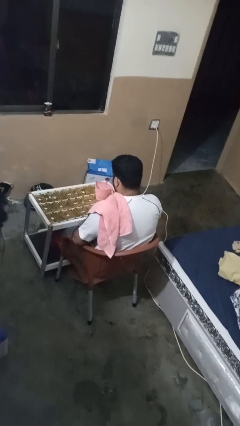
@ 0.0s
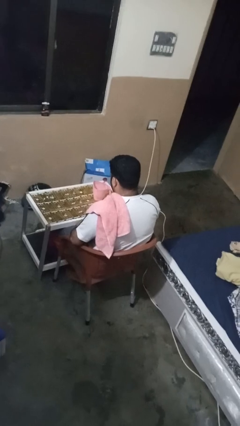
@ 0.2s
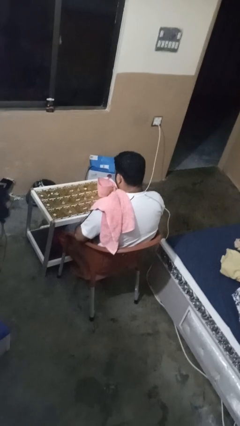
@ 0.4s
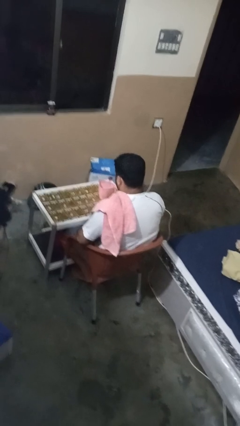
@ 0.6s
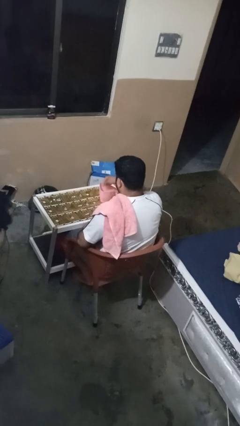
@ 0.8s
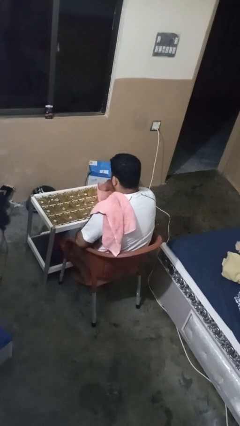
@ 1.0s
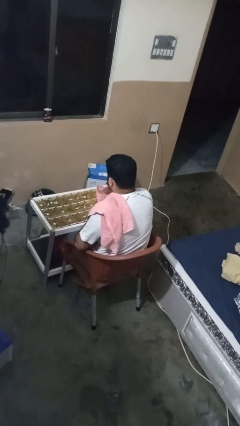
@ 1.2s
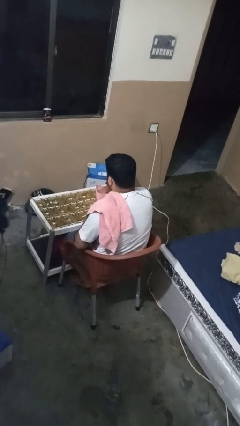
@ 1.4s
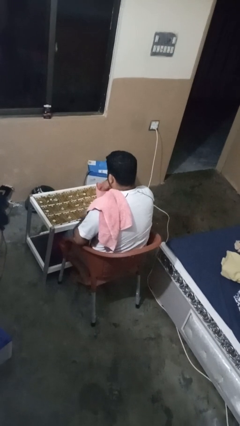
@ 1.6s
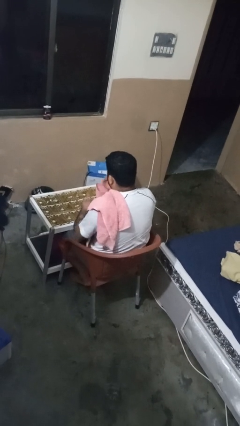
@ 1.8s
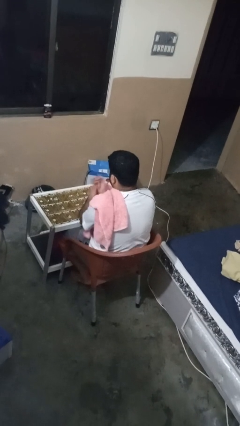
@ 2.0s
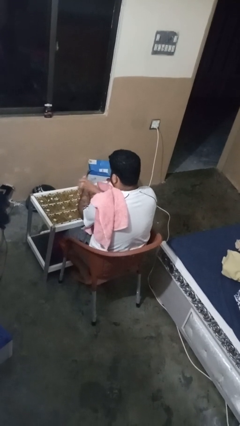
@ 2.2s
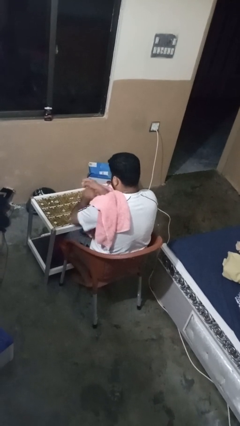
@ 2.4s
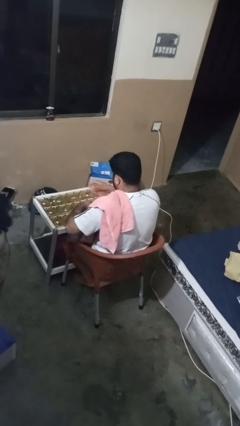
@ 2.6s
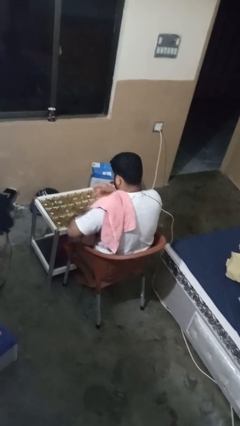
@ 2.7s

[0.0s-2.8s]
person washes hands

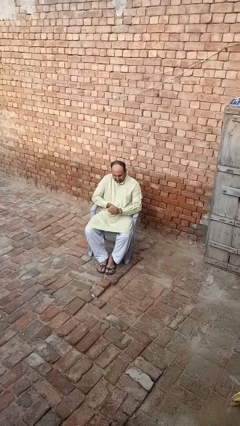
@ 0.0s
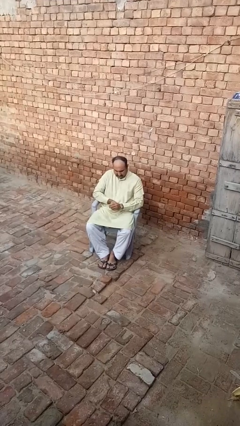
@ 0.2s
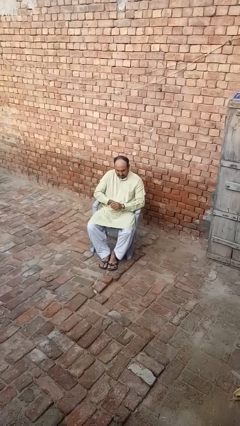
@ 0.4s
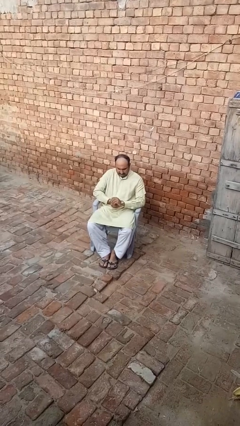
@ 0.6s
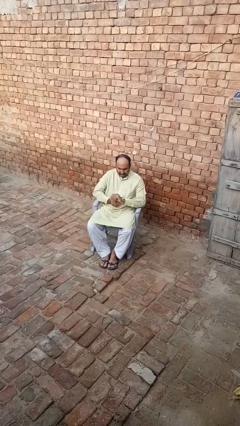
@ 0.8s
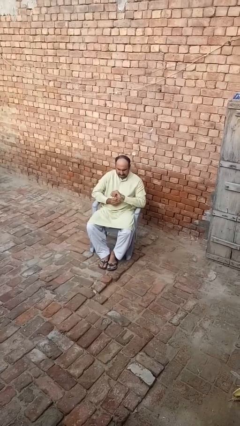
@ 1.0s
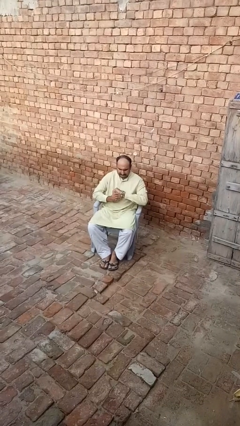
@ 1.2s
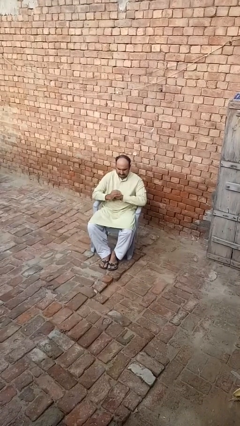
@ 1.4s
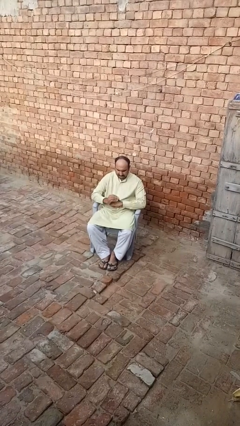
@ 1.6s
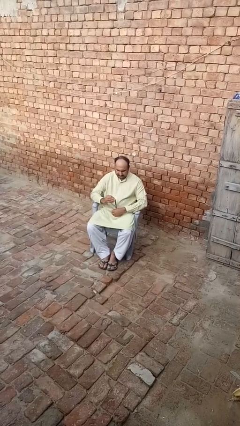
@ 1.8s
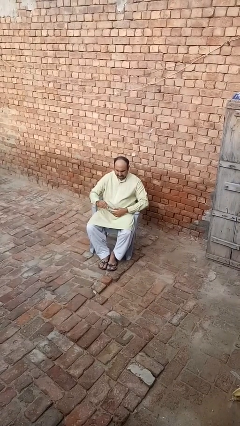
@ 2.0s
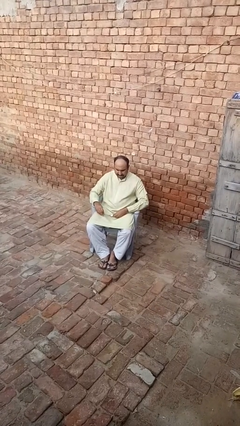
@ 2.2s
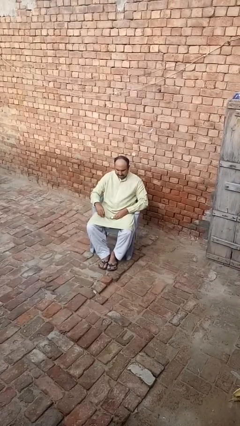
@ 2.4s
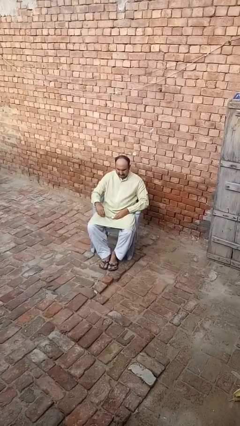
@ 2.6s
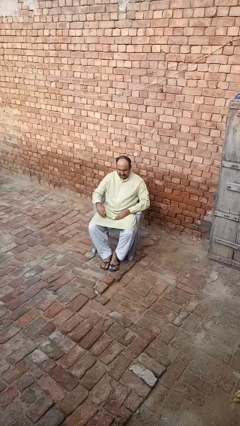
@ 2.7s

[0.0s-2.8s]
person takes off wristwatch

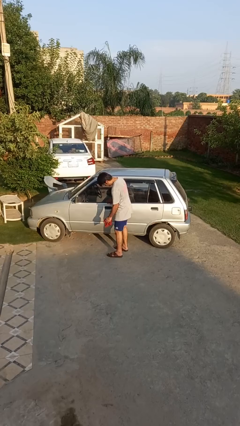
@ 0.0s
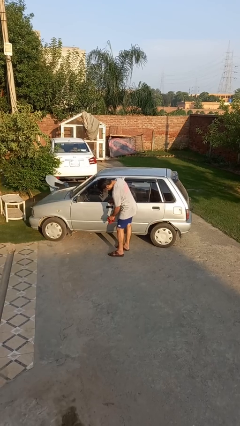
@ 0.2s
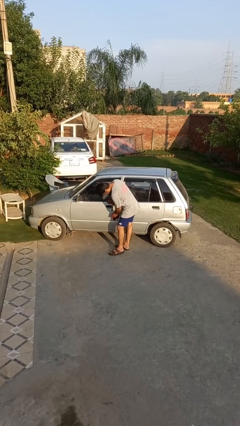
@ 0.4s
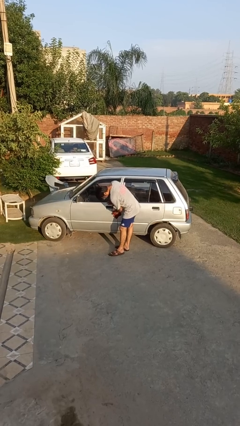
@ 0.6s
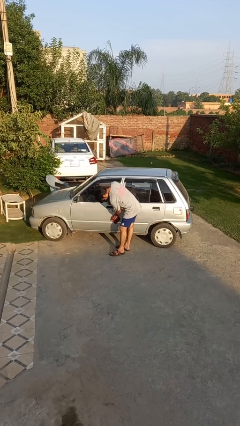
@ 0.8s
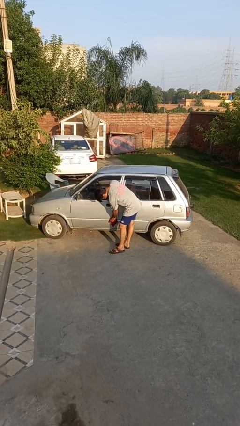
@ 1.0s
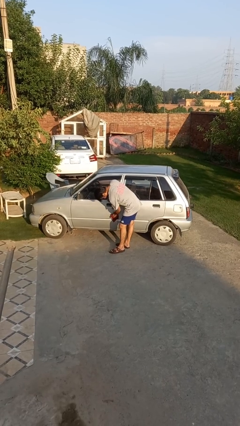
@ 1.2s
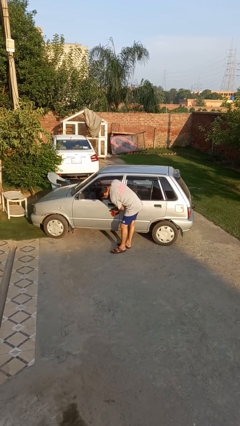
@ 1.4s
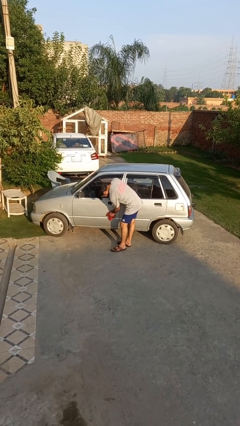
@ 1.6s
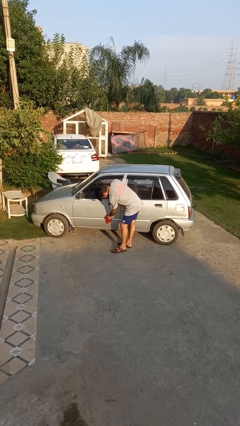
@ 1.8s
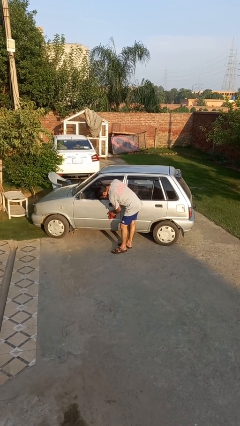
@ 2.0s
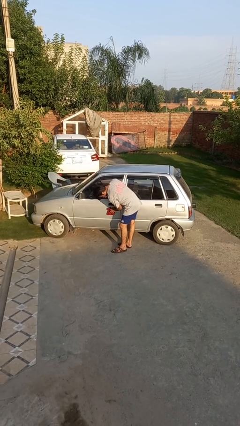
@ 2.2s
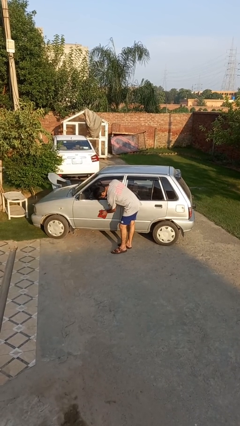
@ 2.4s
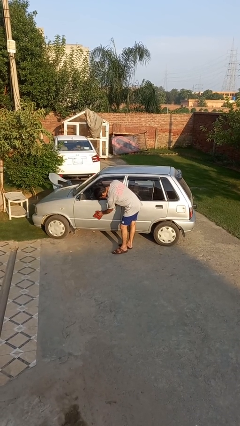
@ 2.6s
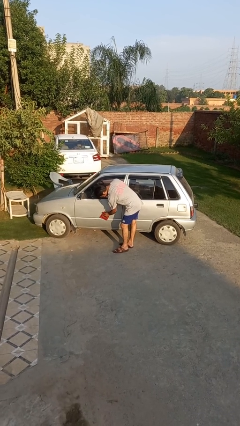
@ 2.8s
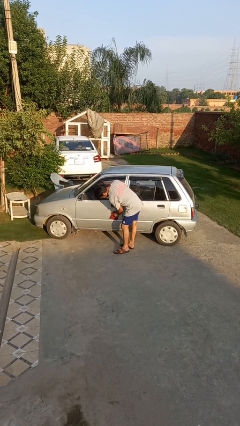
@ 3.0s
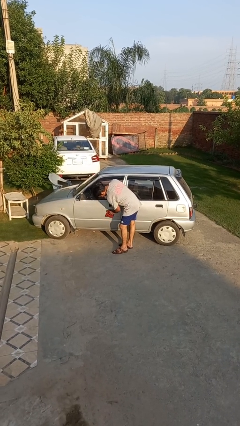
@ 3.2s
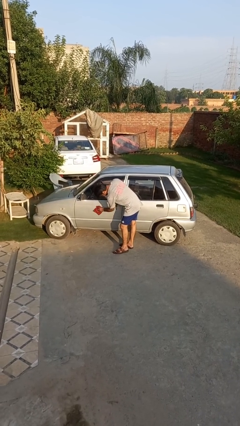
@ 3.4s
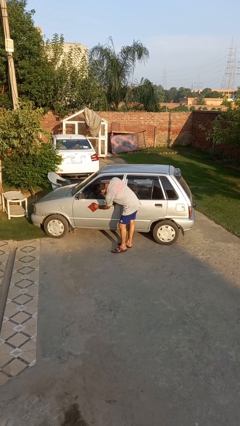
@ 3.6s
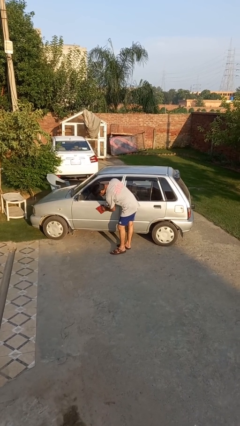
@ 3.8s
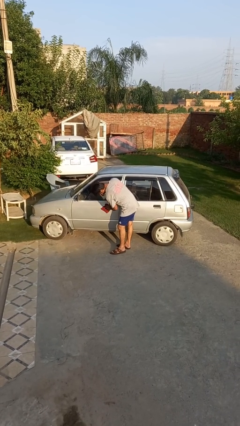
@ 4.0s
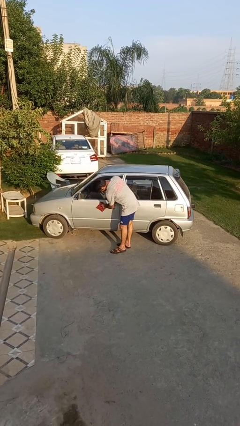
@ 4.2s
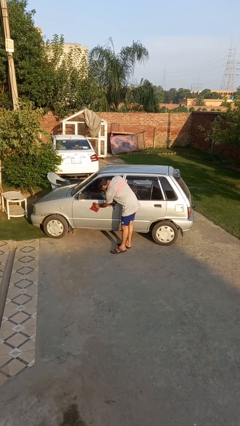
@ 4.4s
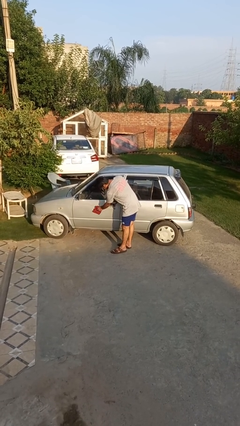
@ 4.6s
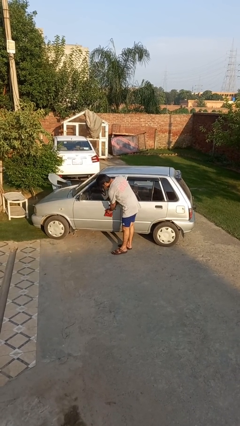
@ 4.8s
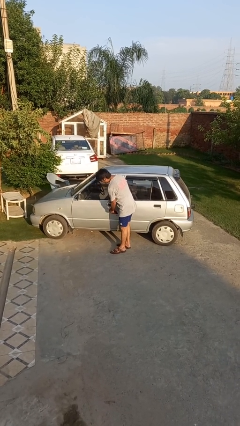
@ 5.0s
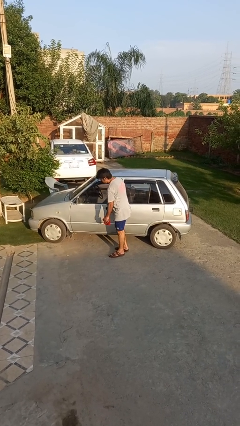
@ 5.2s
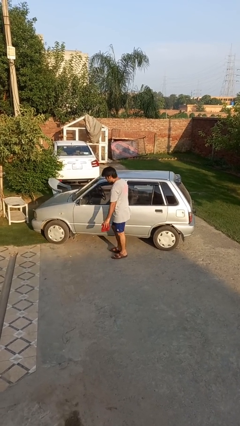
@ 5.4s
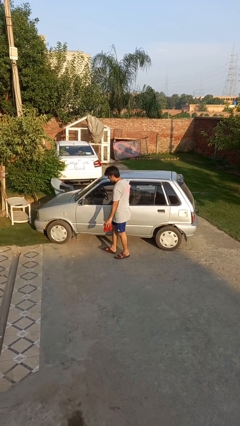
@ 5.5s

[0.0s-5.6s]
person polishes car with rag

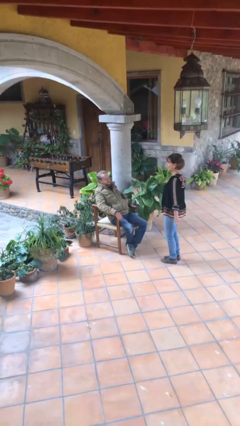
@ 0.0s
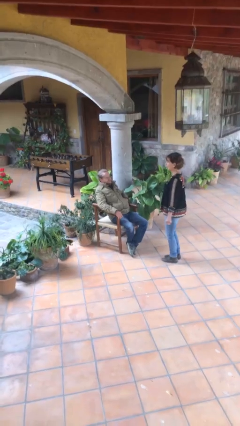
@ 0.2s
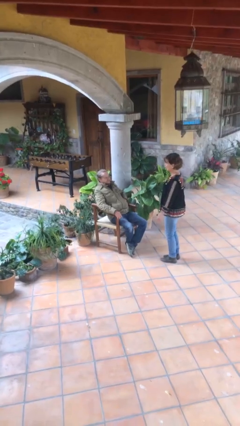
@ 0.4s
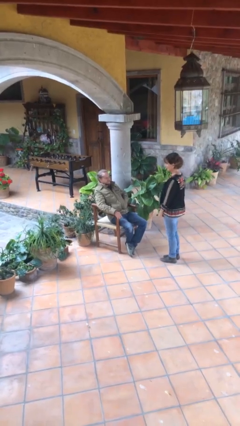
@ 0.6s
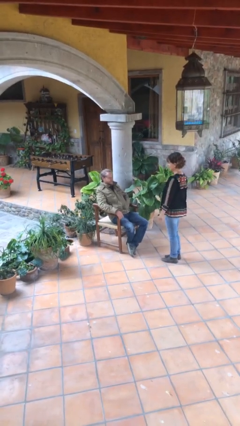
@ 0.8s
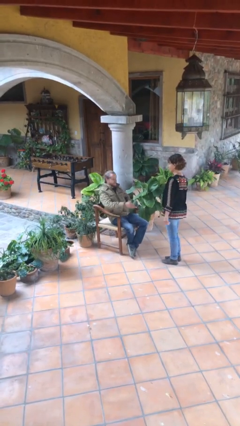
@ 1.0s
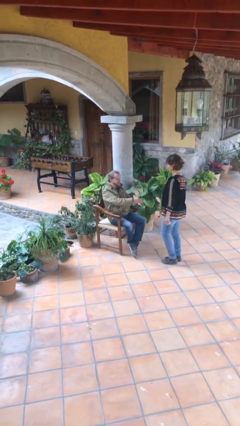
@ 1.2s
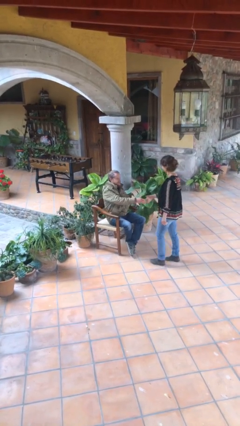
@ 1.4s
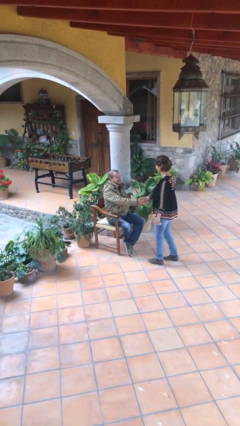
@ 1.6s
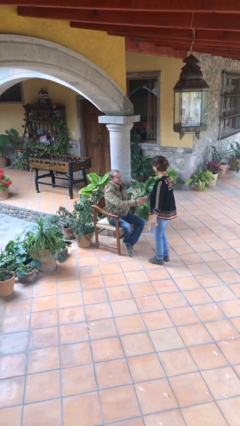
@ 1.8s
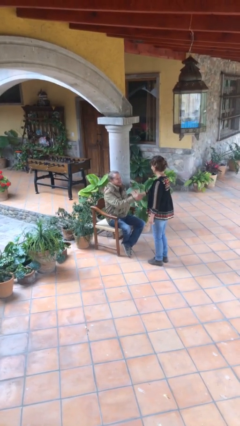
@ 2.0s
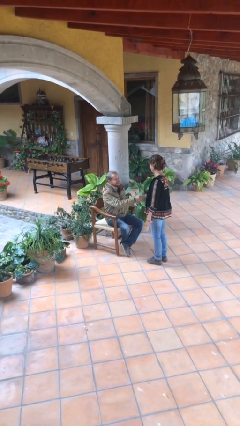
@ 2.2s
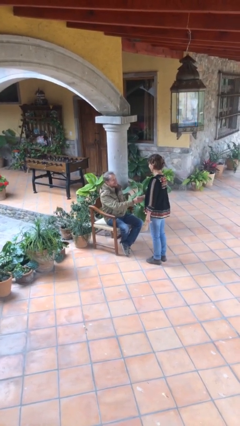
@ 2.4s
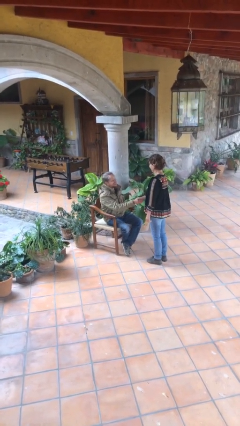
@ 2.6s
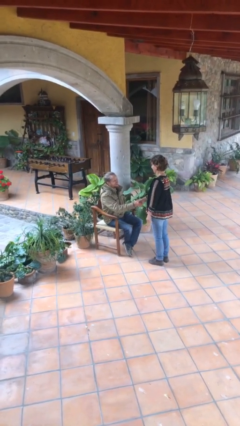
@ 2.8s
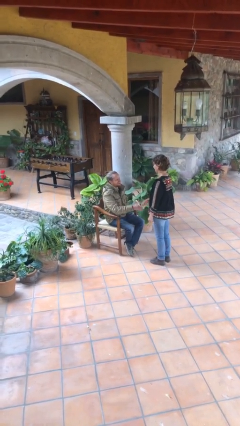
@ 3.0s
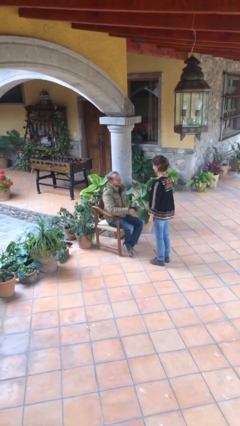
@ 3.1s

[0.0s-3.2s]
person shakes hand

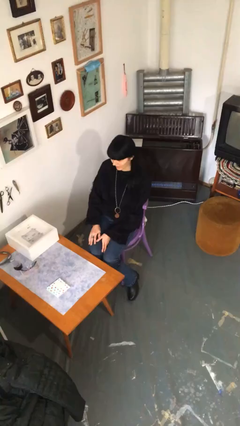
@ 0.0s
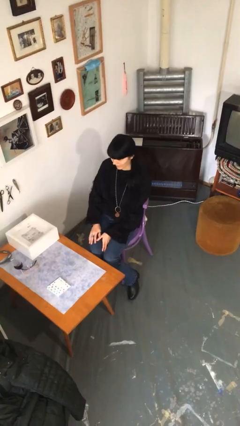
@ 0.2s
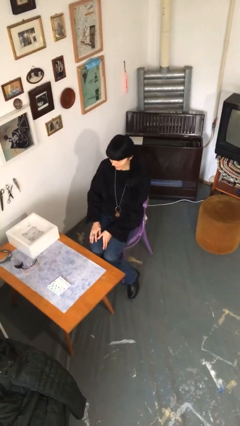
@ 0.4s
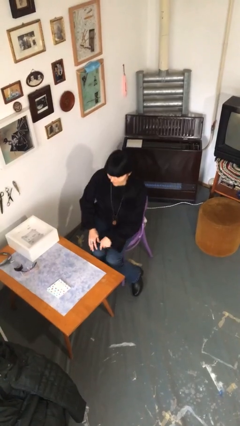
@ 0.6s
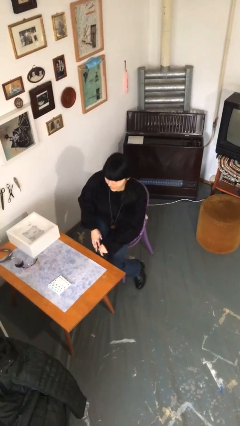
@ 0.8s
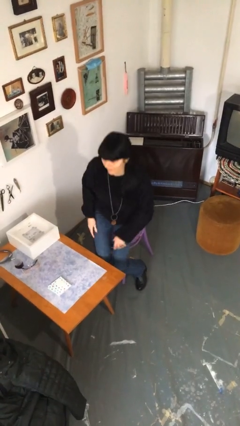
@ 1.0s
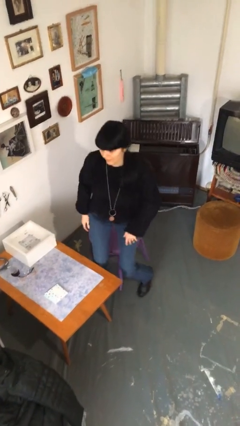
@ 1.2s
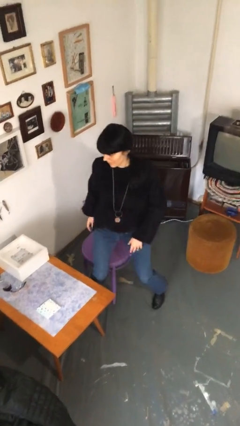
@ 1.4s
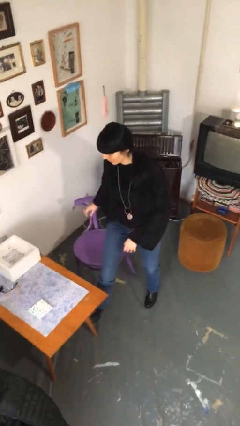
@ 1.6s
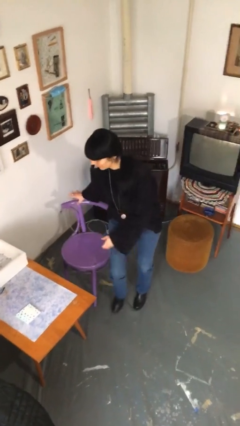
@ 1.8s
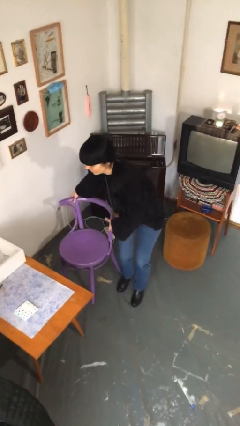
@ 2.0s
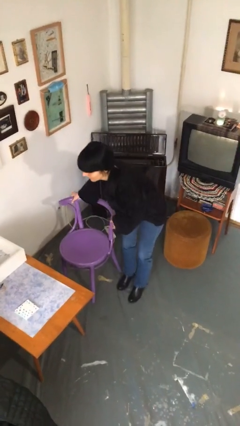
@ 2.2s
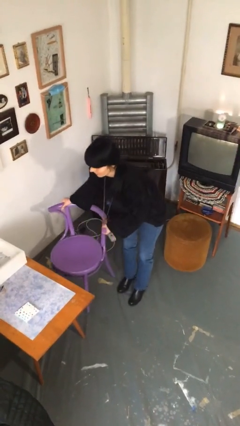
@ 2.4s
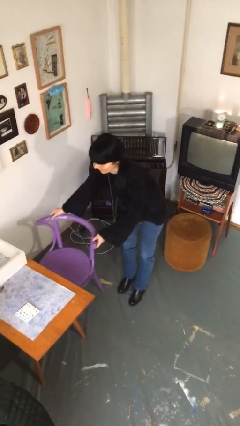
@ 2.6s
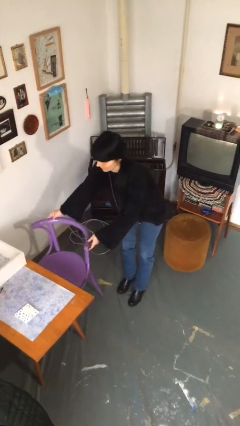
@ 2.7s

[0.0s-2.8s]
person stands up

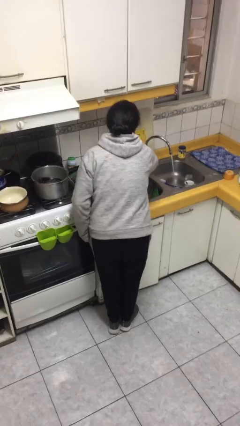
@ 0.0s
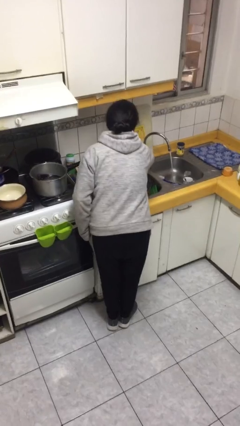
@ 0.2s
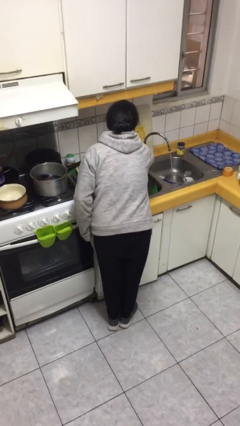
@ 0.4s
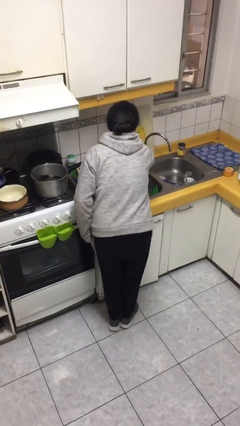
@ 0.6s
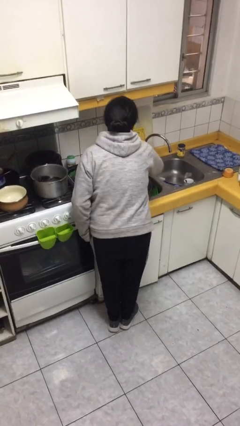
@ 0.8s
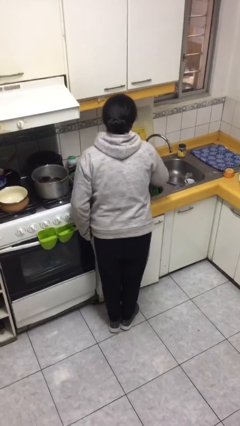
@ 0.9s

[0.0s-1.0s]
person turns off faucet
